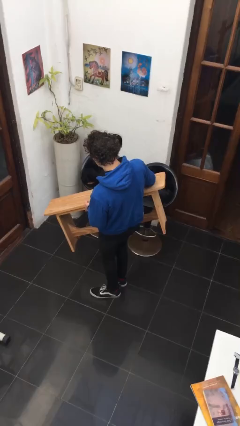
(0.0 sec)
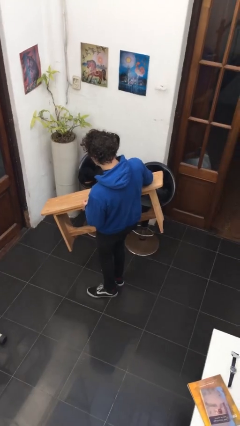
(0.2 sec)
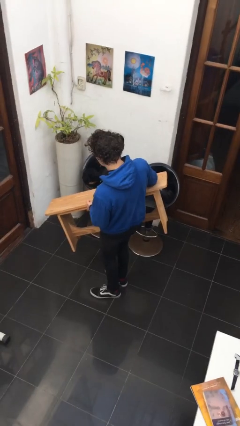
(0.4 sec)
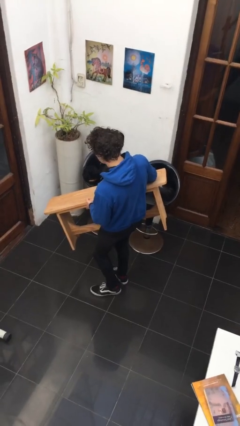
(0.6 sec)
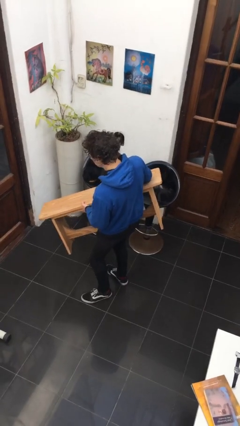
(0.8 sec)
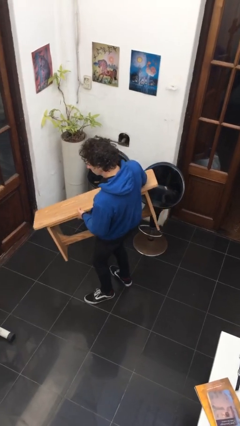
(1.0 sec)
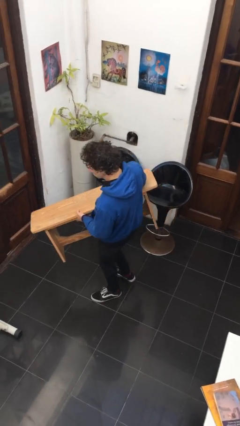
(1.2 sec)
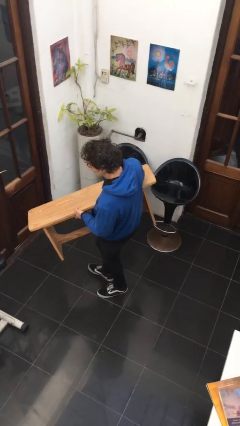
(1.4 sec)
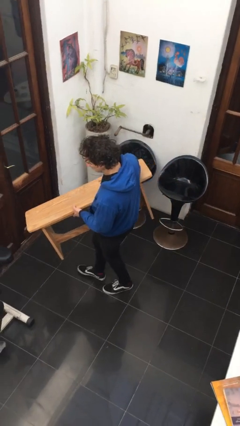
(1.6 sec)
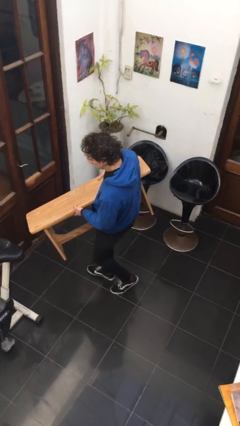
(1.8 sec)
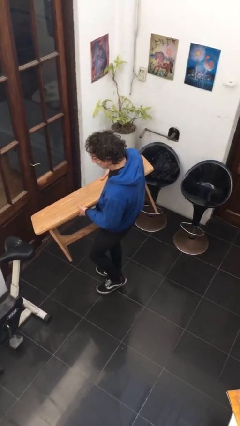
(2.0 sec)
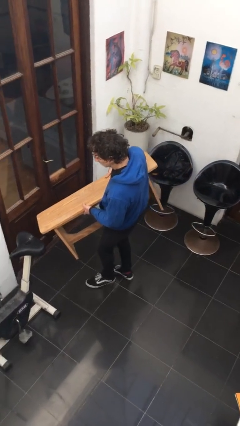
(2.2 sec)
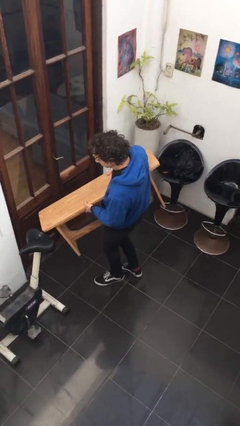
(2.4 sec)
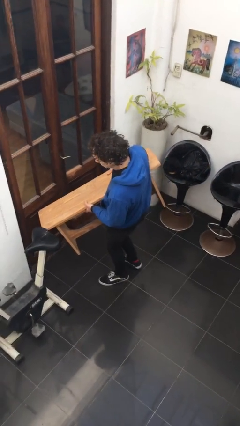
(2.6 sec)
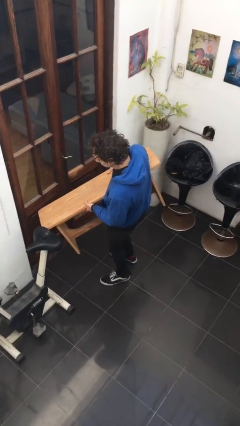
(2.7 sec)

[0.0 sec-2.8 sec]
person carries furniture

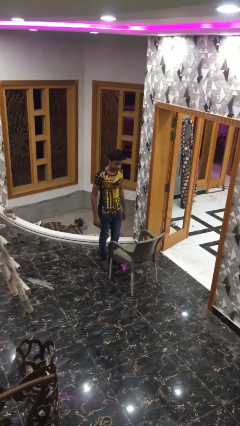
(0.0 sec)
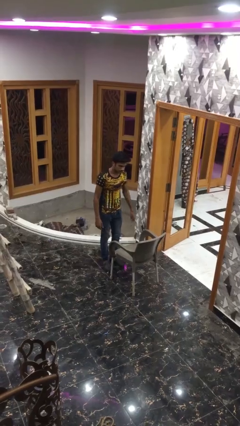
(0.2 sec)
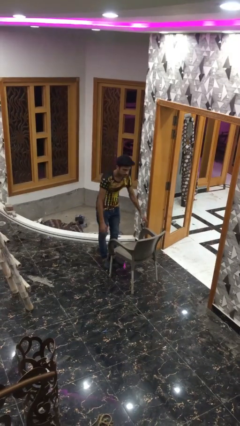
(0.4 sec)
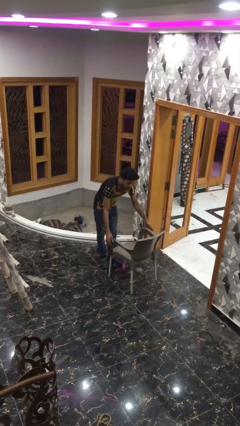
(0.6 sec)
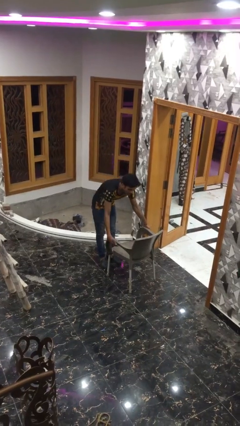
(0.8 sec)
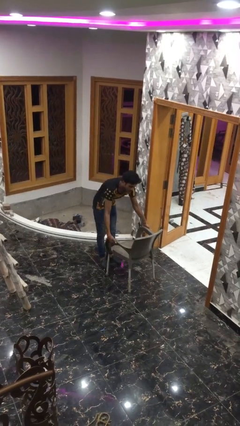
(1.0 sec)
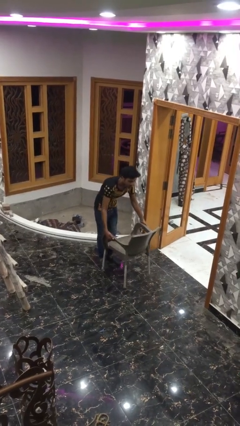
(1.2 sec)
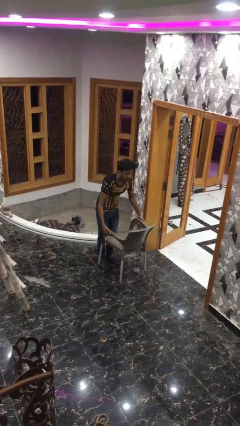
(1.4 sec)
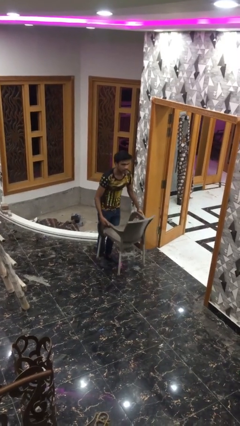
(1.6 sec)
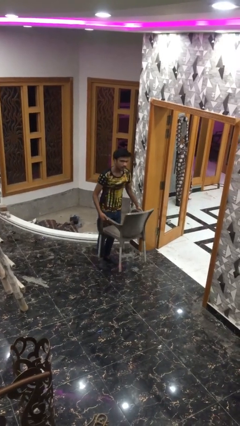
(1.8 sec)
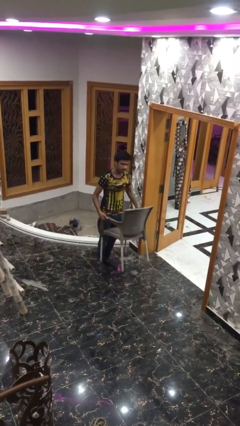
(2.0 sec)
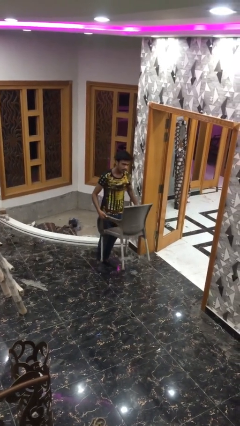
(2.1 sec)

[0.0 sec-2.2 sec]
person picks up object from floor

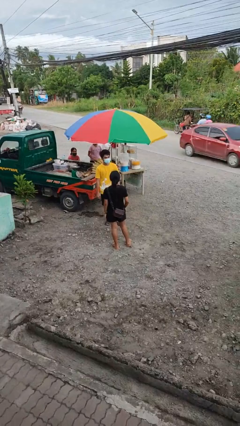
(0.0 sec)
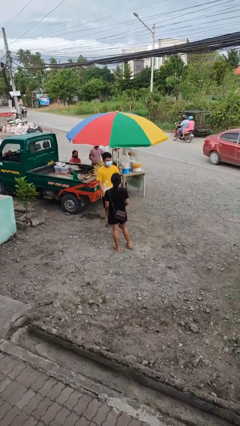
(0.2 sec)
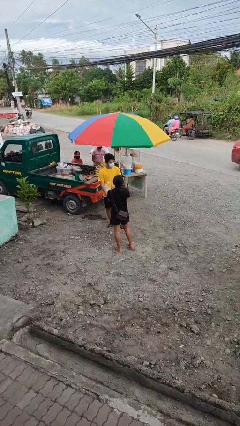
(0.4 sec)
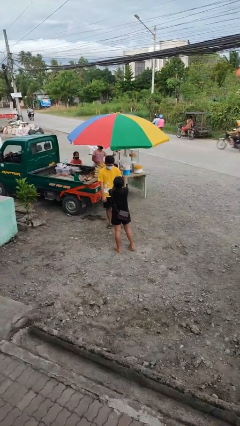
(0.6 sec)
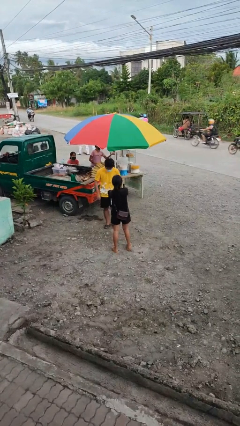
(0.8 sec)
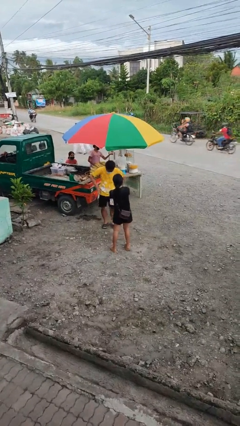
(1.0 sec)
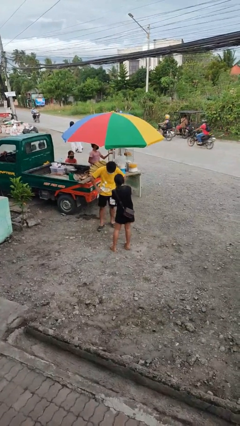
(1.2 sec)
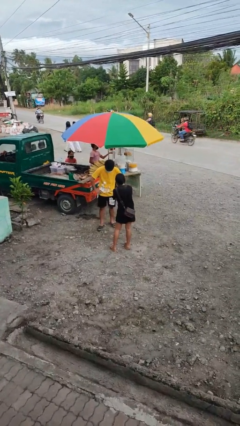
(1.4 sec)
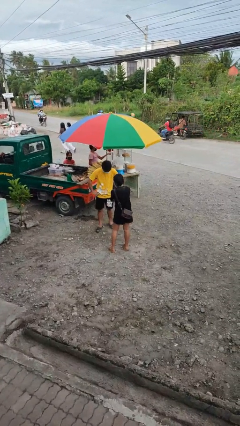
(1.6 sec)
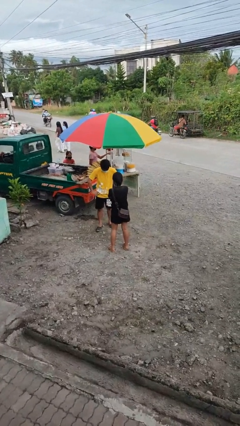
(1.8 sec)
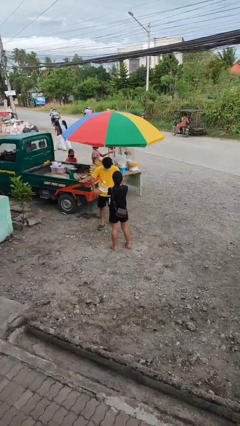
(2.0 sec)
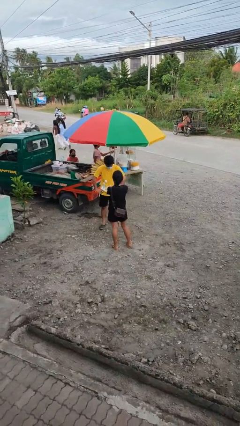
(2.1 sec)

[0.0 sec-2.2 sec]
person laughs with person

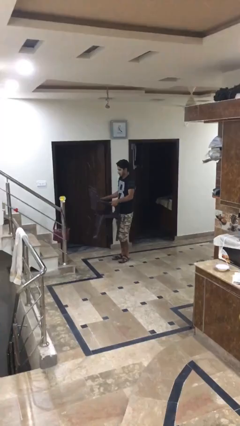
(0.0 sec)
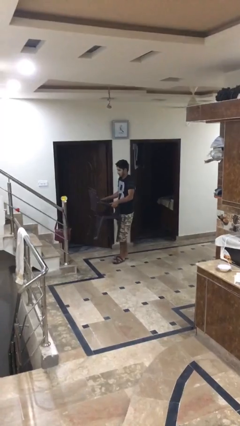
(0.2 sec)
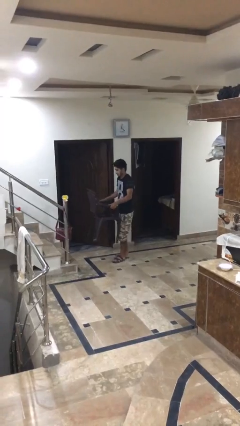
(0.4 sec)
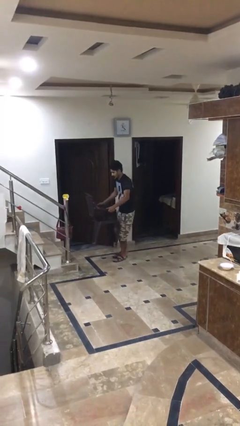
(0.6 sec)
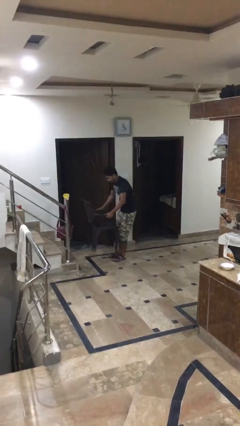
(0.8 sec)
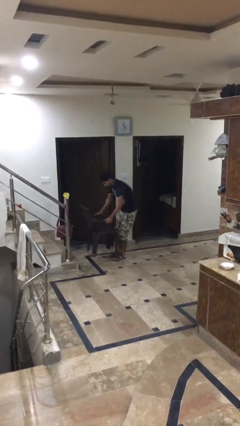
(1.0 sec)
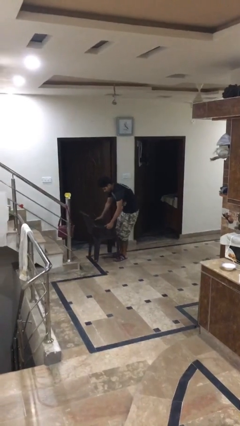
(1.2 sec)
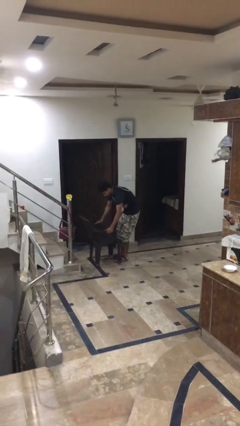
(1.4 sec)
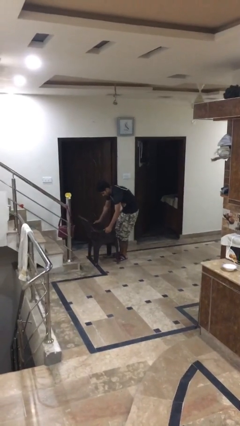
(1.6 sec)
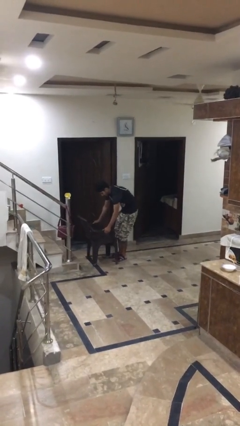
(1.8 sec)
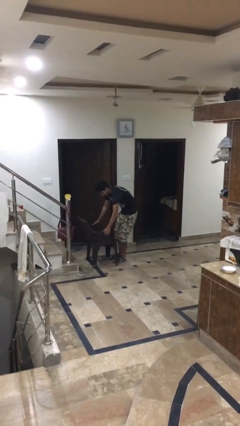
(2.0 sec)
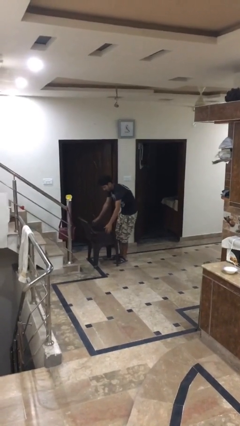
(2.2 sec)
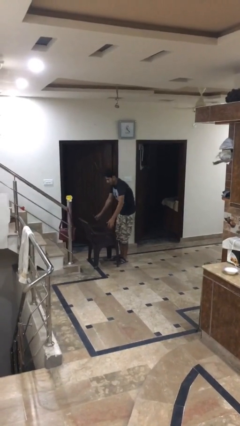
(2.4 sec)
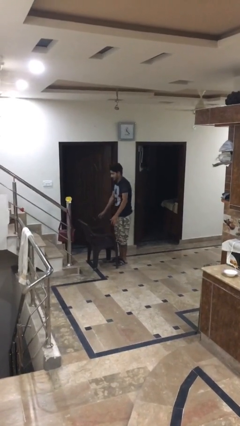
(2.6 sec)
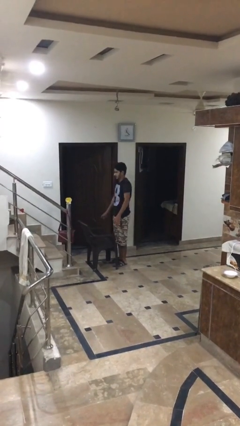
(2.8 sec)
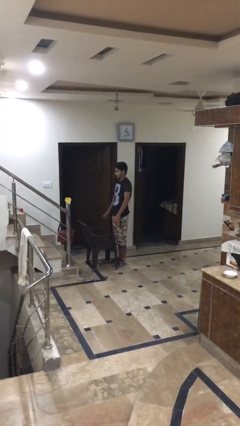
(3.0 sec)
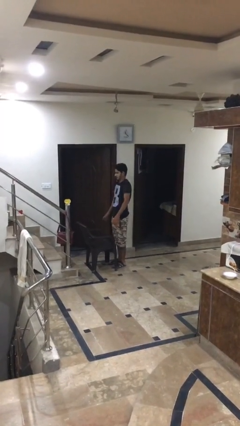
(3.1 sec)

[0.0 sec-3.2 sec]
person puts down object on floor

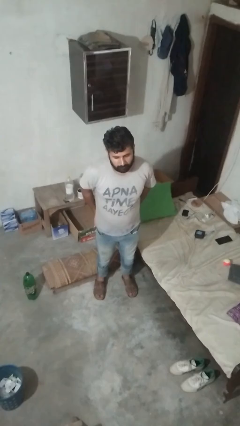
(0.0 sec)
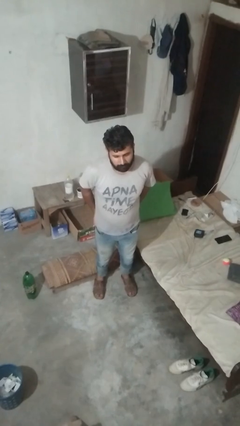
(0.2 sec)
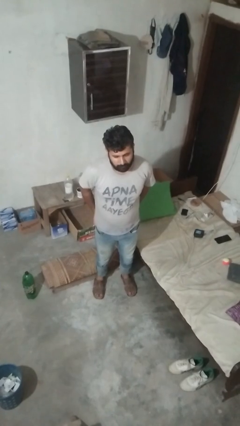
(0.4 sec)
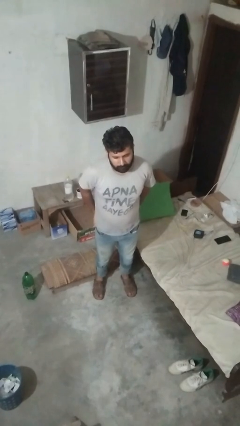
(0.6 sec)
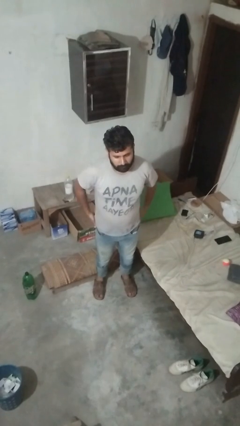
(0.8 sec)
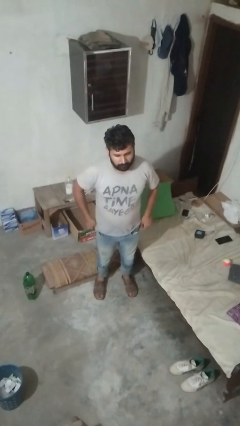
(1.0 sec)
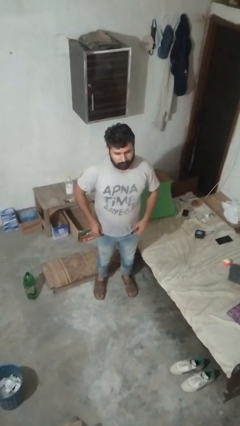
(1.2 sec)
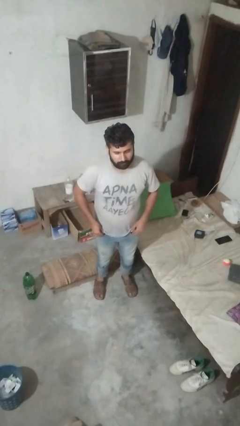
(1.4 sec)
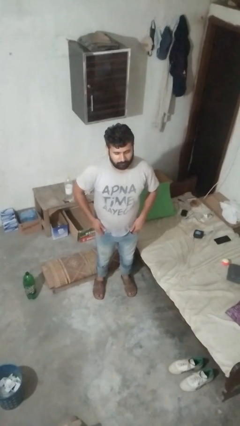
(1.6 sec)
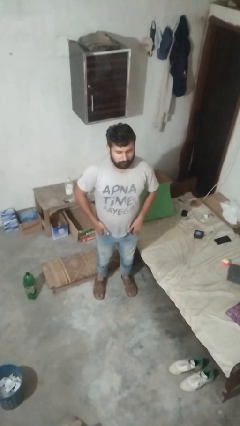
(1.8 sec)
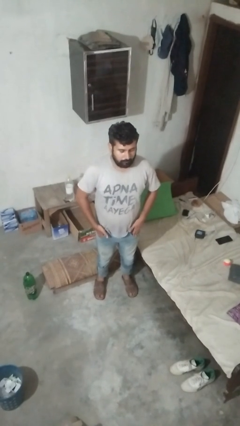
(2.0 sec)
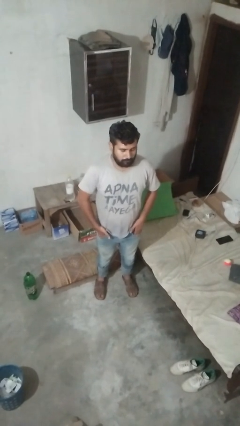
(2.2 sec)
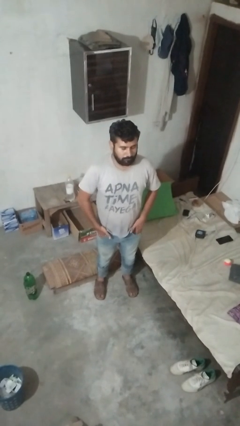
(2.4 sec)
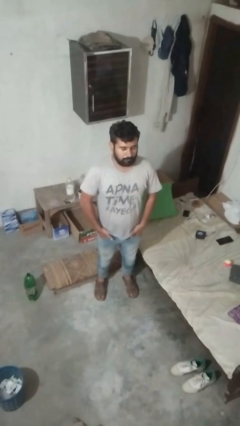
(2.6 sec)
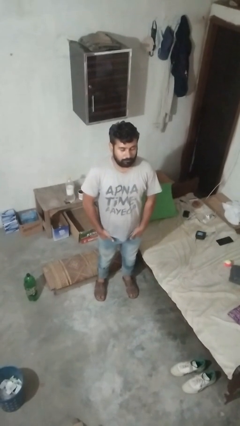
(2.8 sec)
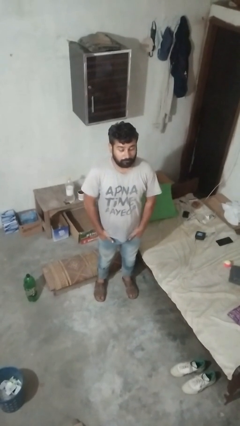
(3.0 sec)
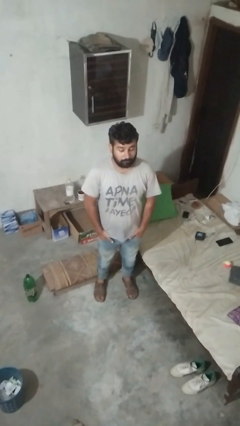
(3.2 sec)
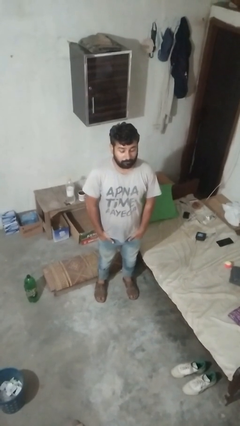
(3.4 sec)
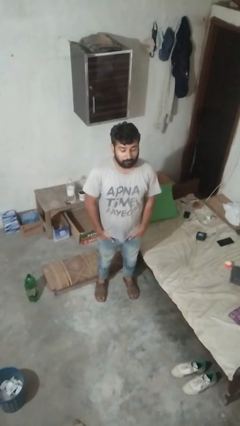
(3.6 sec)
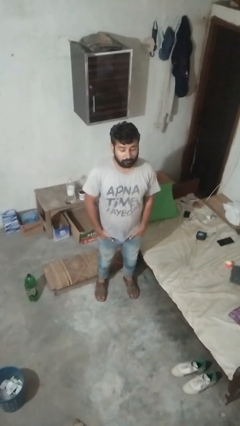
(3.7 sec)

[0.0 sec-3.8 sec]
person puts hands in back pockets

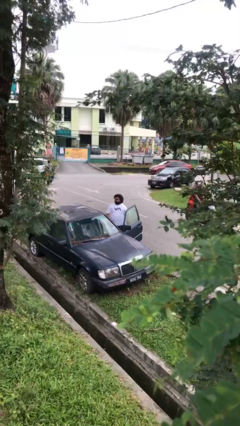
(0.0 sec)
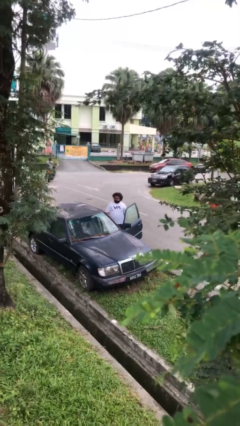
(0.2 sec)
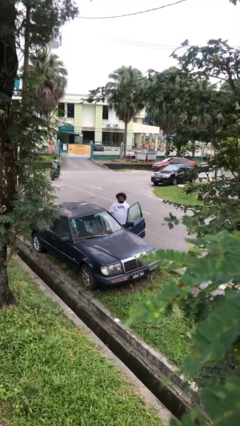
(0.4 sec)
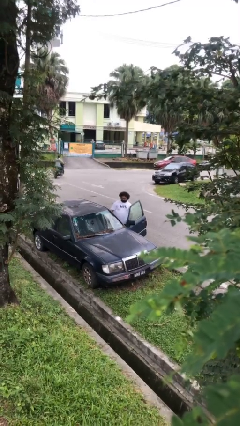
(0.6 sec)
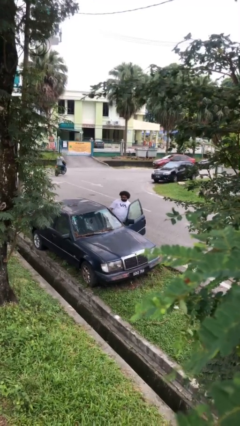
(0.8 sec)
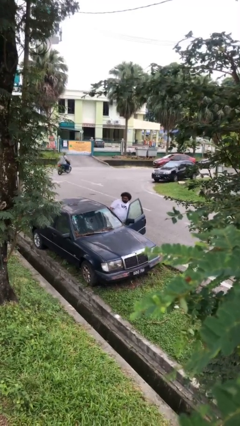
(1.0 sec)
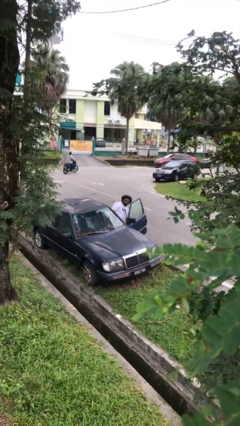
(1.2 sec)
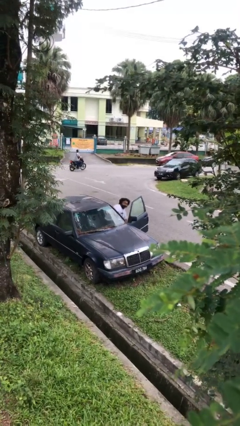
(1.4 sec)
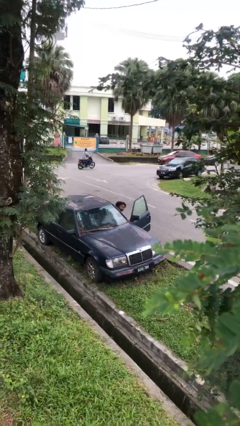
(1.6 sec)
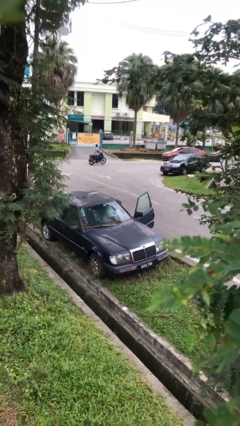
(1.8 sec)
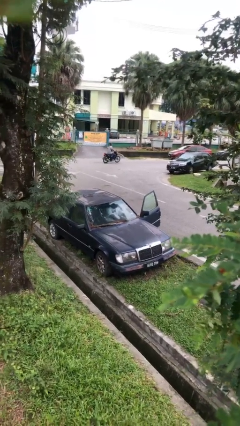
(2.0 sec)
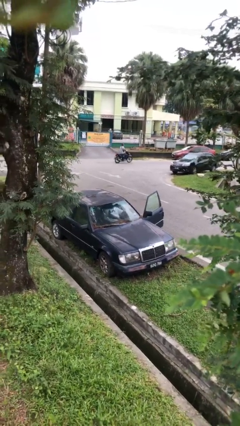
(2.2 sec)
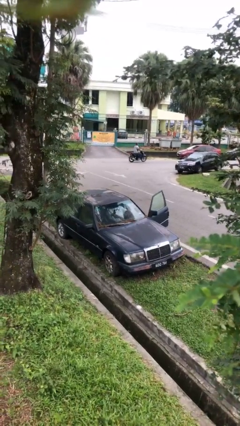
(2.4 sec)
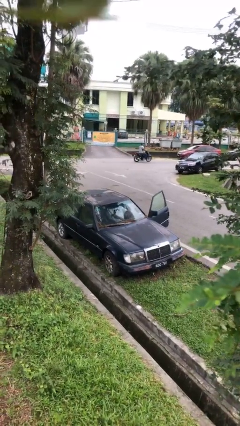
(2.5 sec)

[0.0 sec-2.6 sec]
person enters car

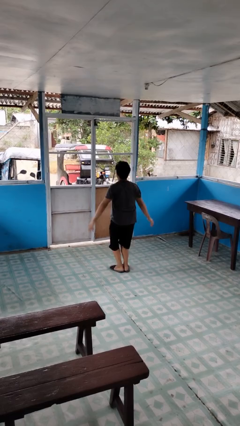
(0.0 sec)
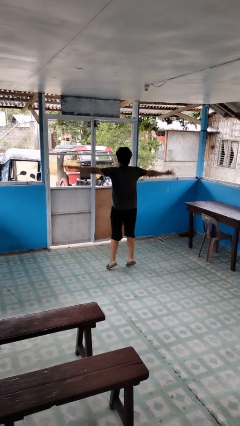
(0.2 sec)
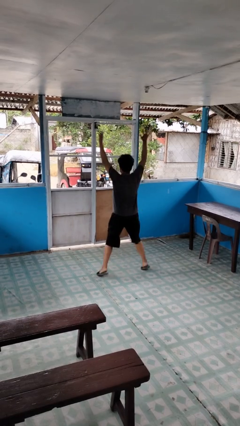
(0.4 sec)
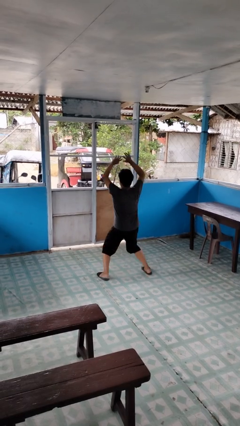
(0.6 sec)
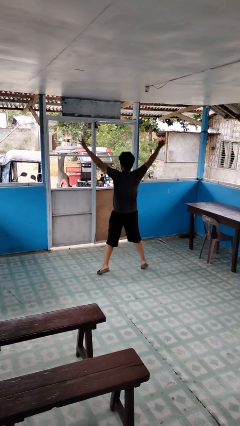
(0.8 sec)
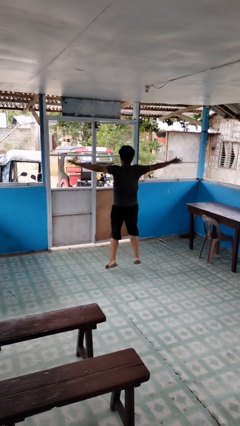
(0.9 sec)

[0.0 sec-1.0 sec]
person exercises with jumping jacks
